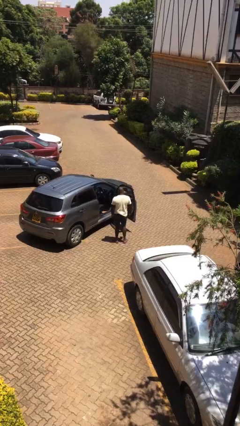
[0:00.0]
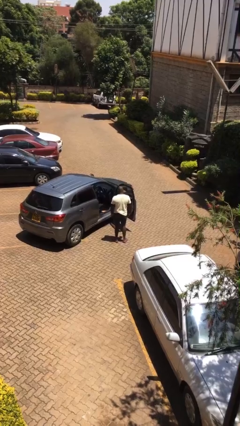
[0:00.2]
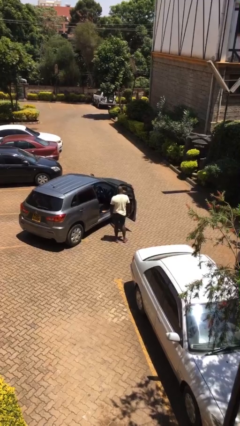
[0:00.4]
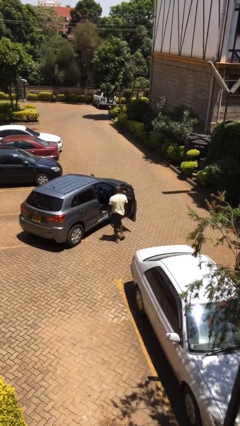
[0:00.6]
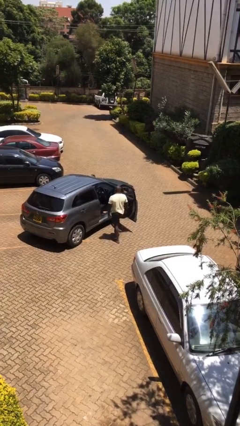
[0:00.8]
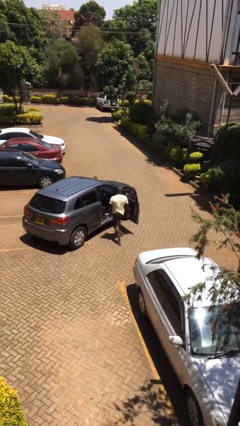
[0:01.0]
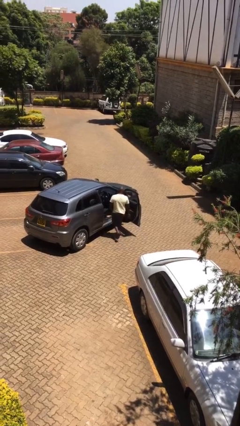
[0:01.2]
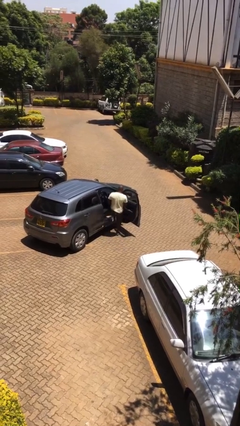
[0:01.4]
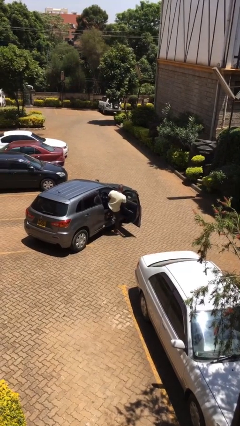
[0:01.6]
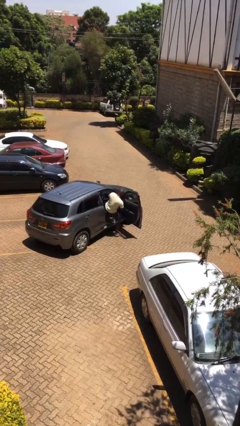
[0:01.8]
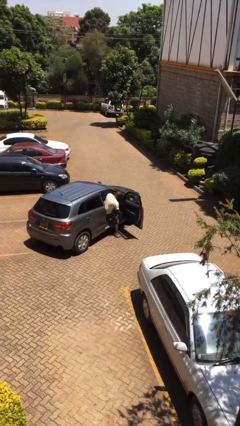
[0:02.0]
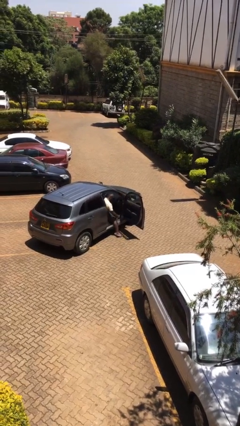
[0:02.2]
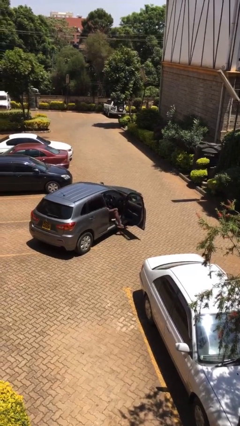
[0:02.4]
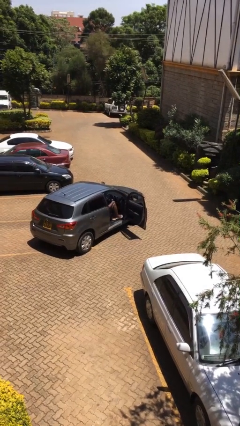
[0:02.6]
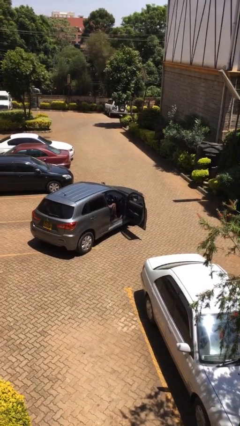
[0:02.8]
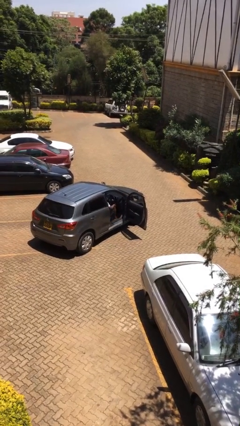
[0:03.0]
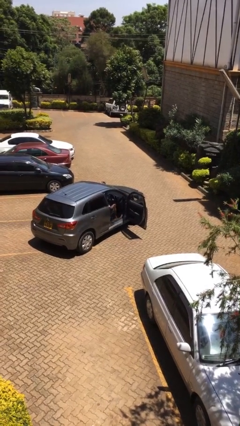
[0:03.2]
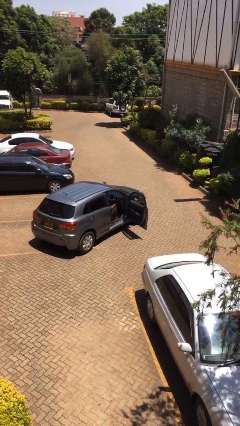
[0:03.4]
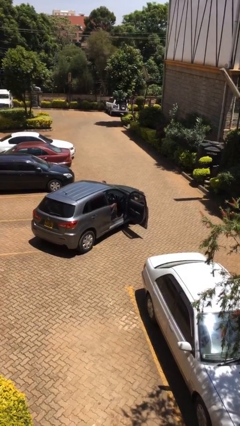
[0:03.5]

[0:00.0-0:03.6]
person enters car

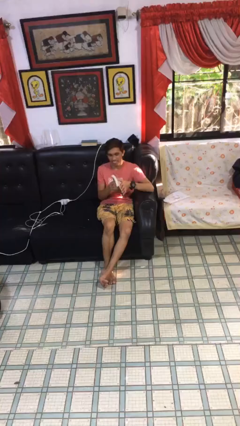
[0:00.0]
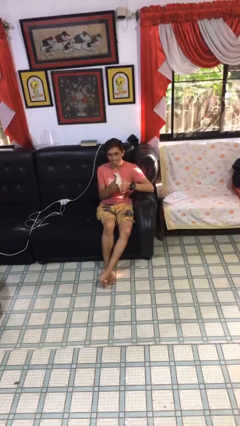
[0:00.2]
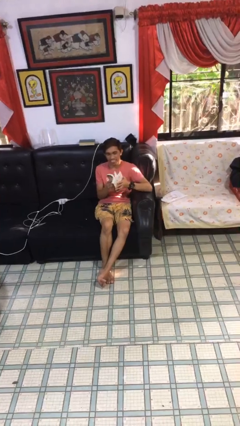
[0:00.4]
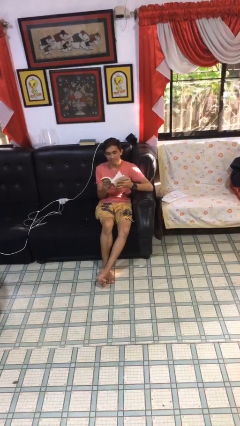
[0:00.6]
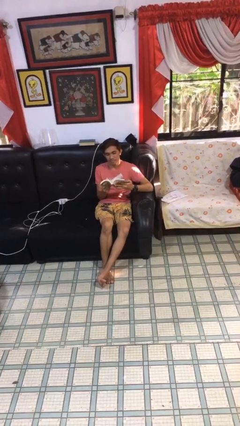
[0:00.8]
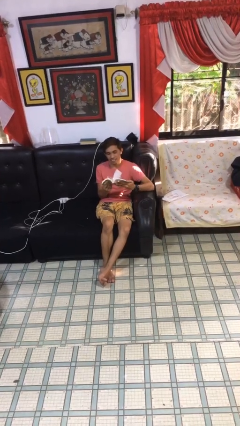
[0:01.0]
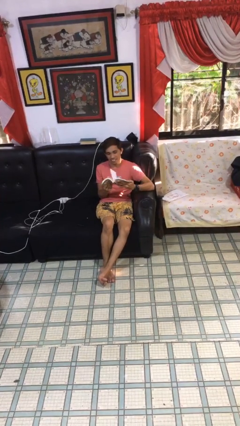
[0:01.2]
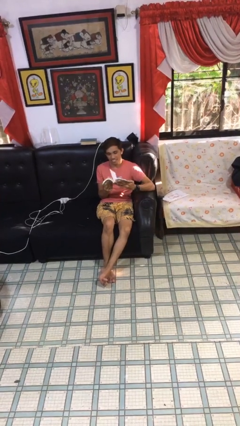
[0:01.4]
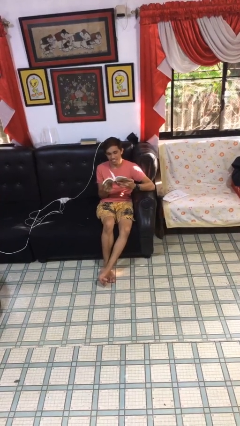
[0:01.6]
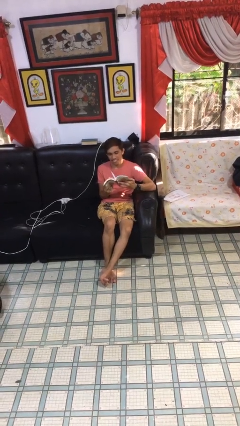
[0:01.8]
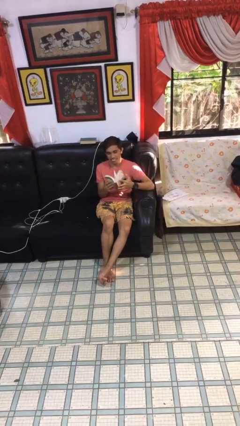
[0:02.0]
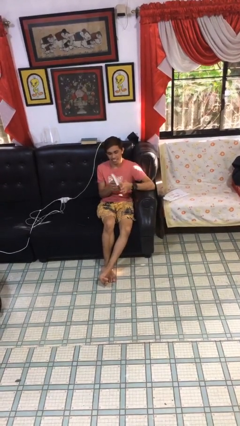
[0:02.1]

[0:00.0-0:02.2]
person reads document

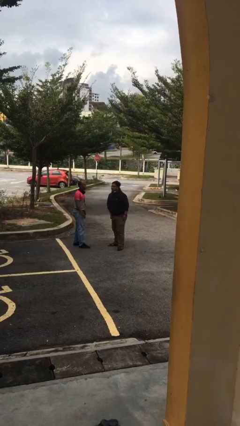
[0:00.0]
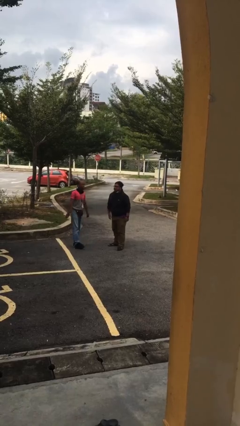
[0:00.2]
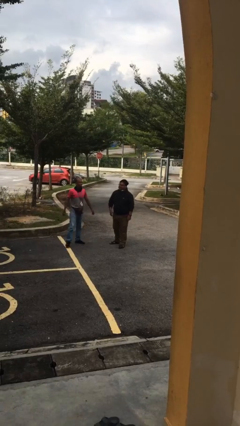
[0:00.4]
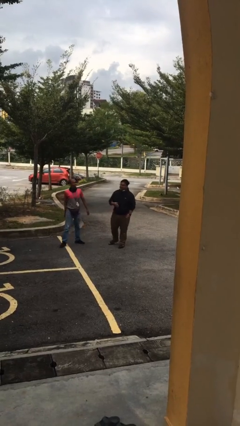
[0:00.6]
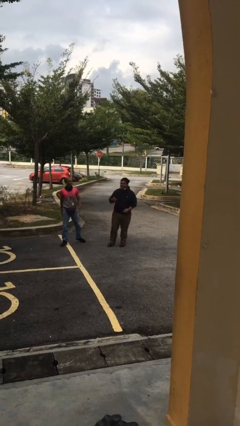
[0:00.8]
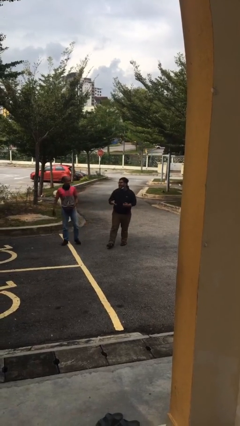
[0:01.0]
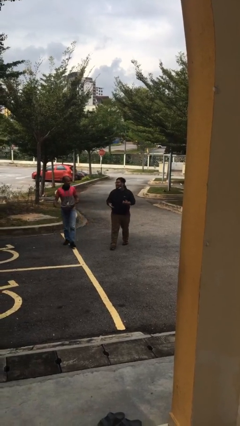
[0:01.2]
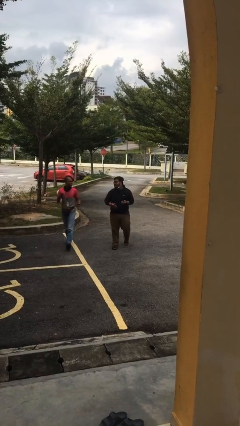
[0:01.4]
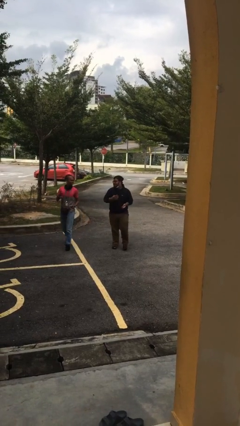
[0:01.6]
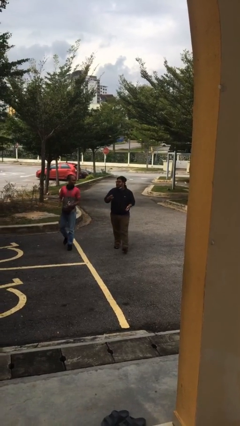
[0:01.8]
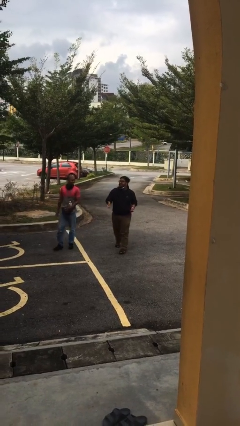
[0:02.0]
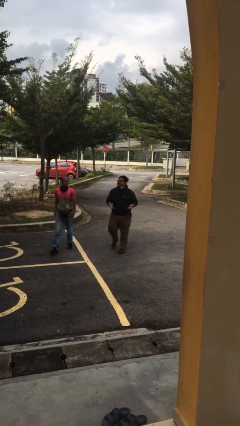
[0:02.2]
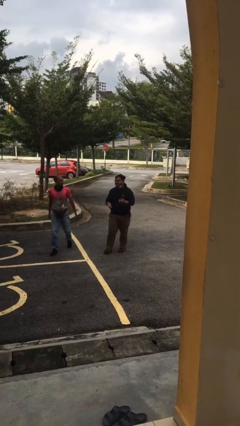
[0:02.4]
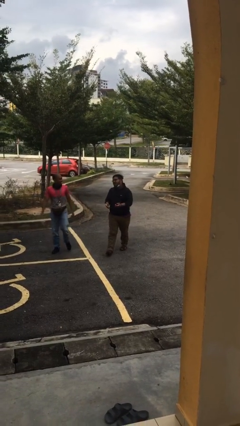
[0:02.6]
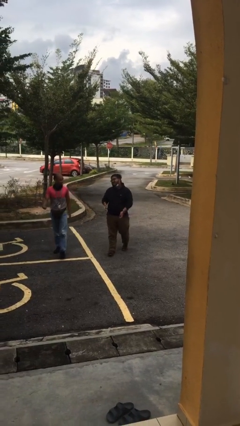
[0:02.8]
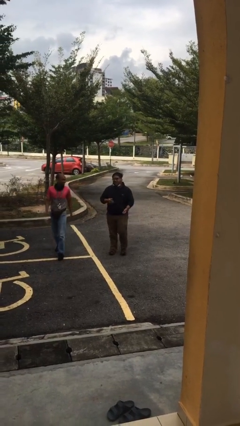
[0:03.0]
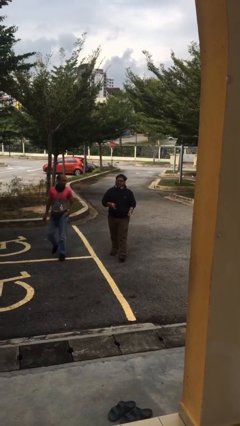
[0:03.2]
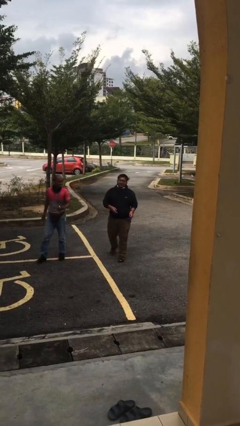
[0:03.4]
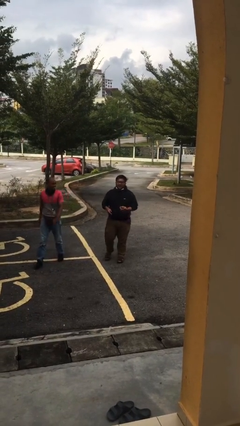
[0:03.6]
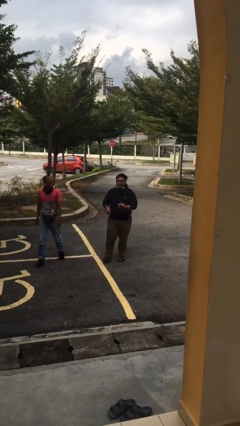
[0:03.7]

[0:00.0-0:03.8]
person talks to person

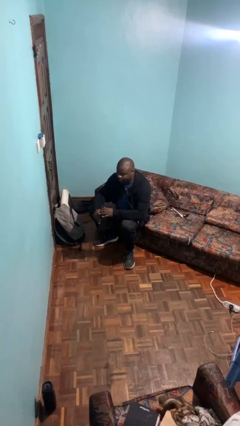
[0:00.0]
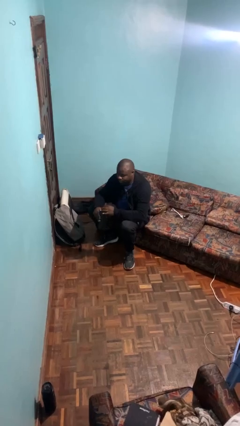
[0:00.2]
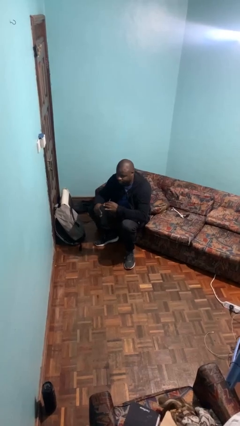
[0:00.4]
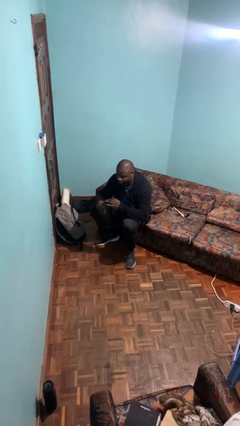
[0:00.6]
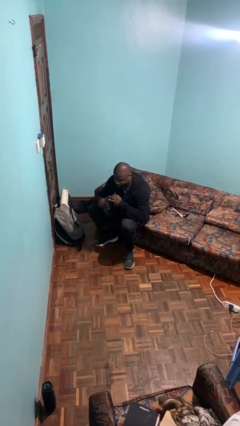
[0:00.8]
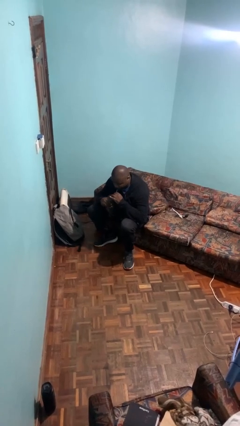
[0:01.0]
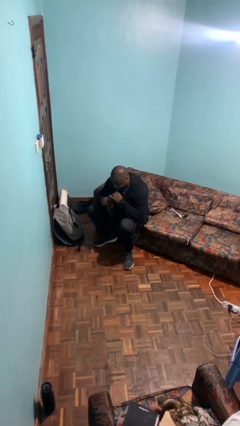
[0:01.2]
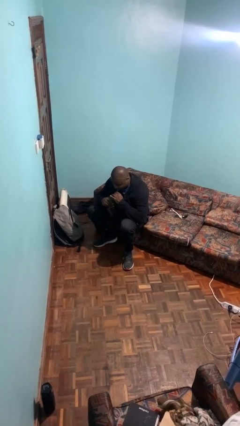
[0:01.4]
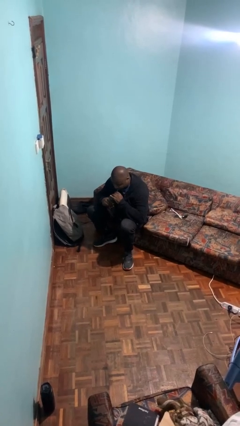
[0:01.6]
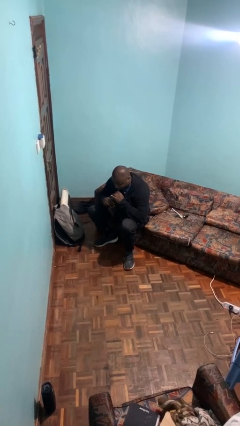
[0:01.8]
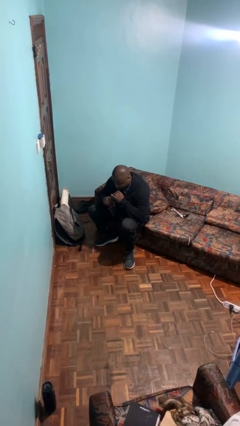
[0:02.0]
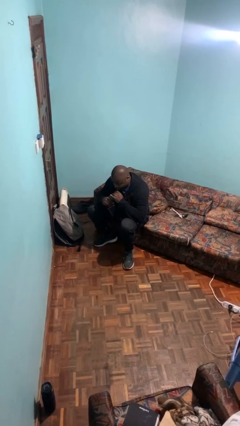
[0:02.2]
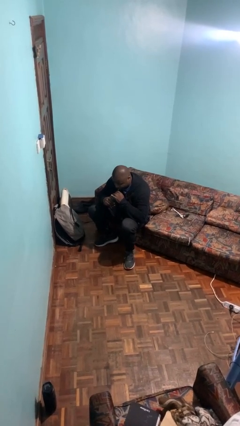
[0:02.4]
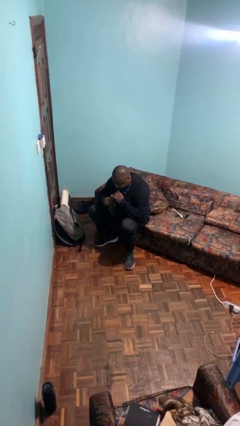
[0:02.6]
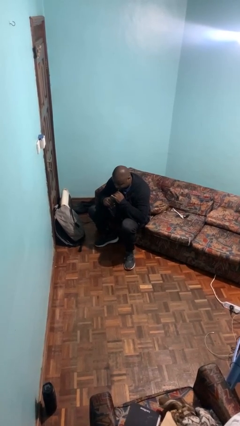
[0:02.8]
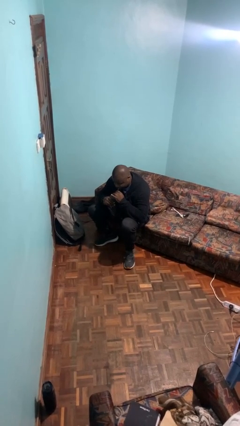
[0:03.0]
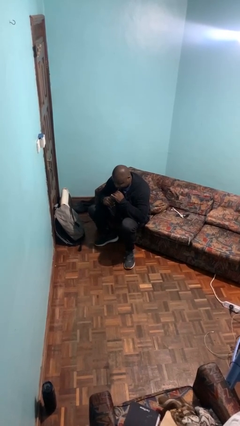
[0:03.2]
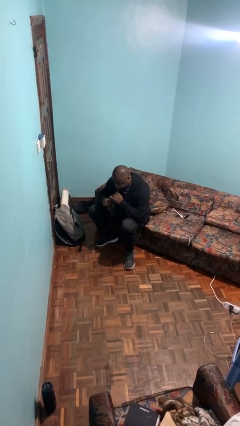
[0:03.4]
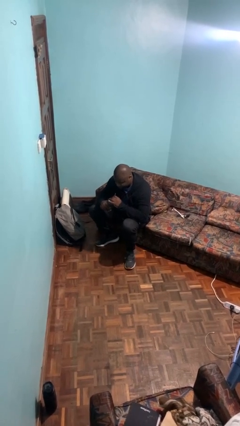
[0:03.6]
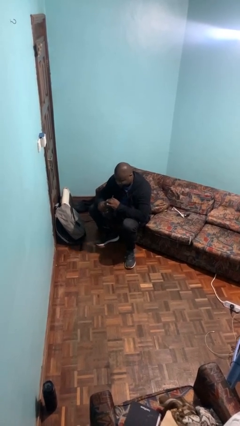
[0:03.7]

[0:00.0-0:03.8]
person drinks from straw

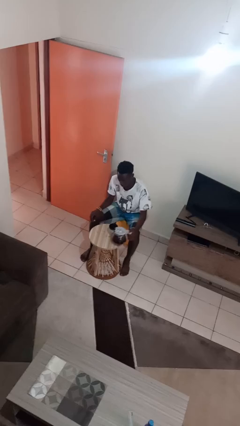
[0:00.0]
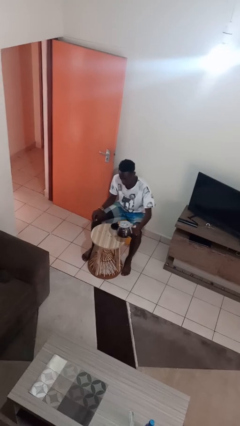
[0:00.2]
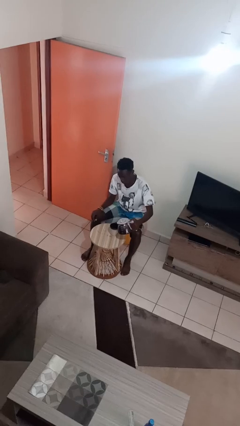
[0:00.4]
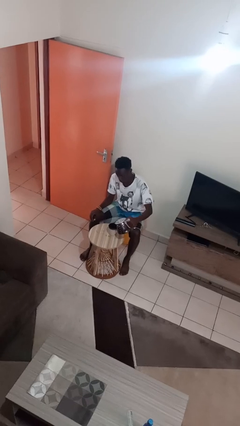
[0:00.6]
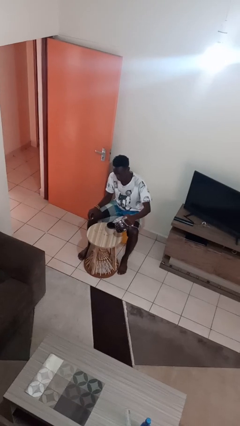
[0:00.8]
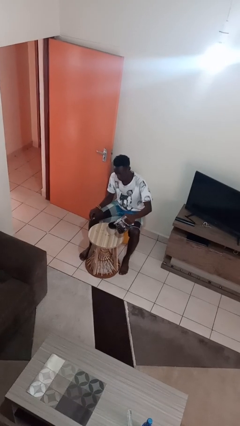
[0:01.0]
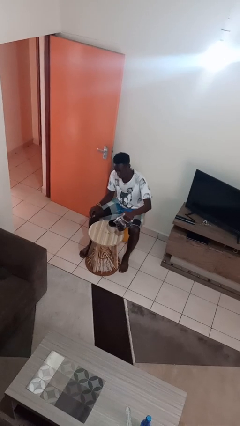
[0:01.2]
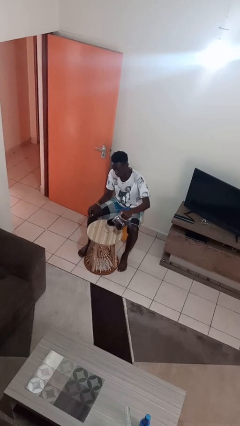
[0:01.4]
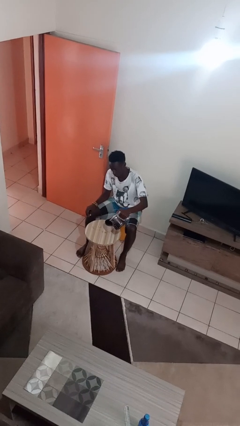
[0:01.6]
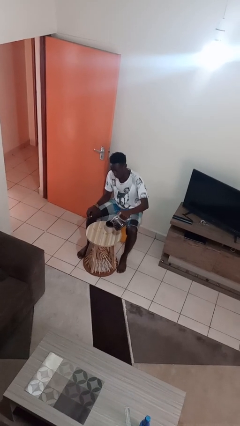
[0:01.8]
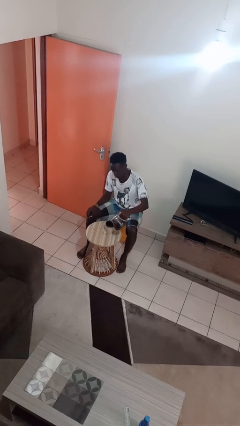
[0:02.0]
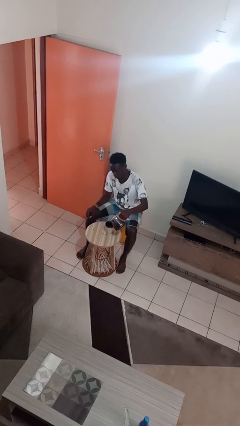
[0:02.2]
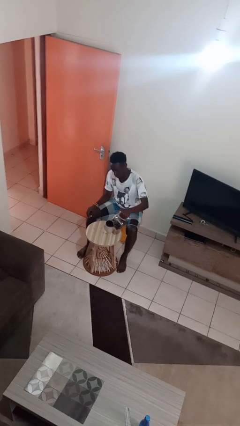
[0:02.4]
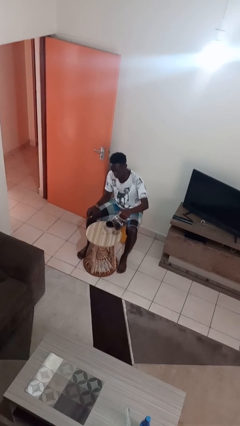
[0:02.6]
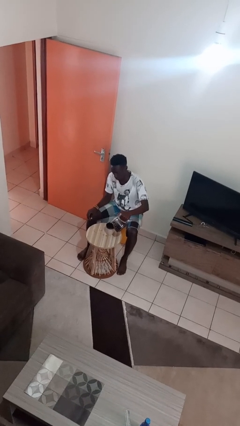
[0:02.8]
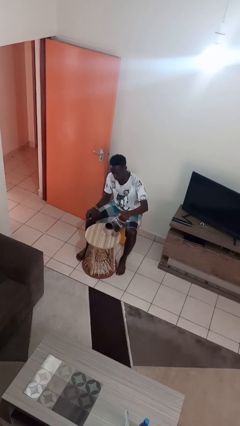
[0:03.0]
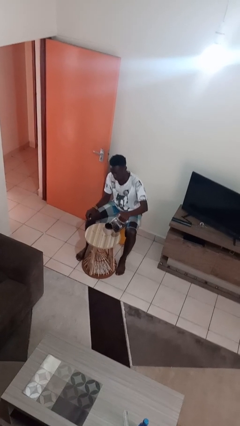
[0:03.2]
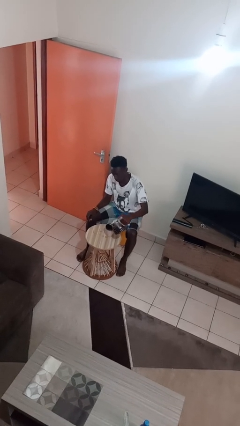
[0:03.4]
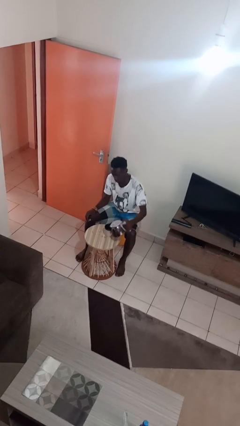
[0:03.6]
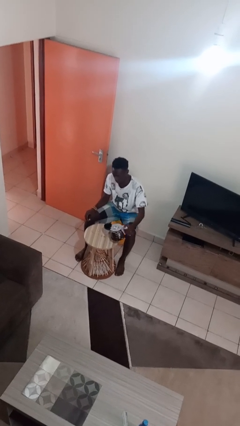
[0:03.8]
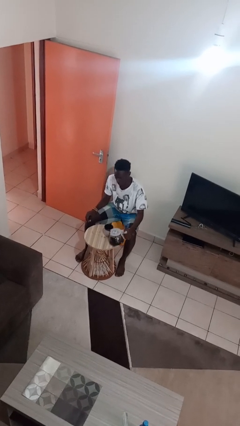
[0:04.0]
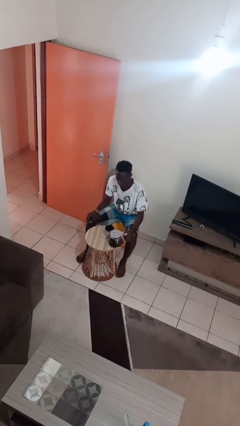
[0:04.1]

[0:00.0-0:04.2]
person pours coffee into mug
